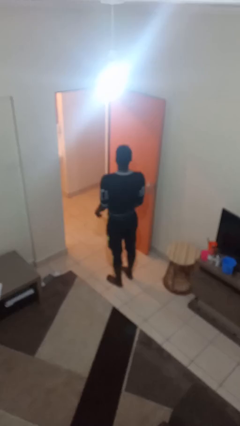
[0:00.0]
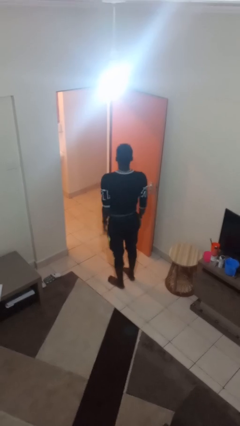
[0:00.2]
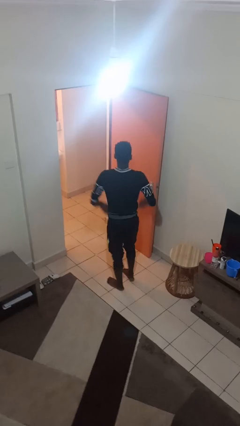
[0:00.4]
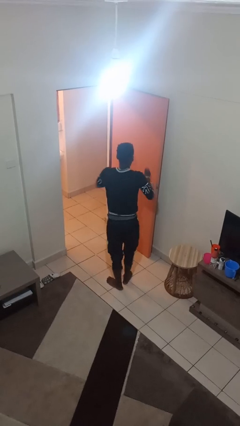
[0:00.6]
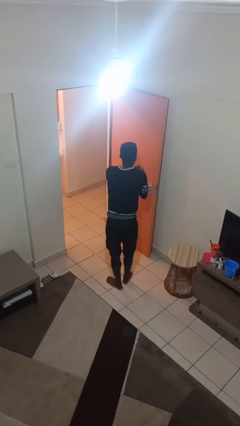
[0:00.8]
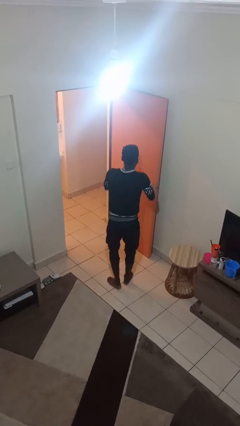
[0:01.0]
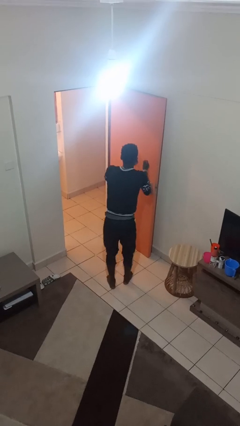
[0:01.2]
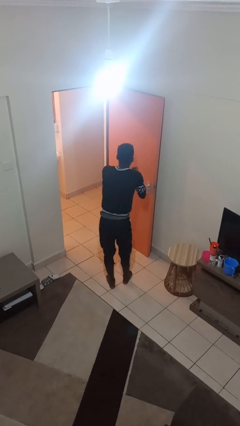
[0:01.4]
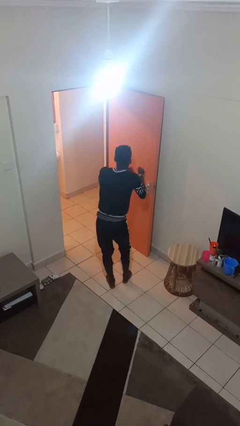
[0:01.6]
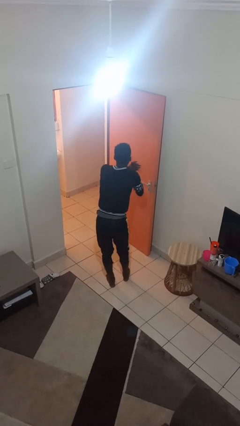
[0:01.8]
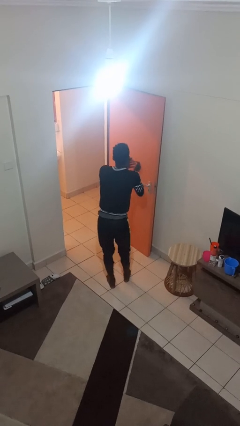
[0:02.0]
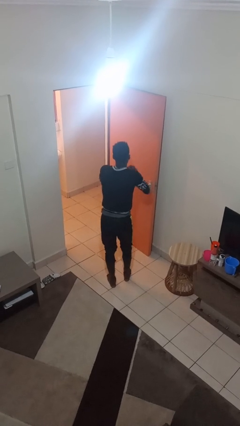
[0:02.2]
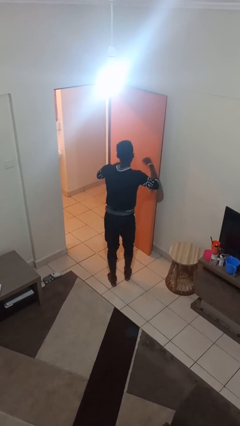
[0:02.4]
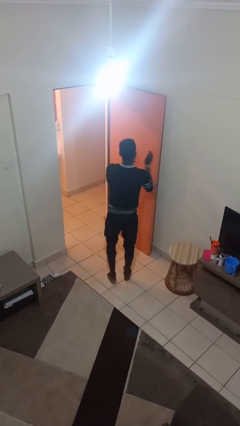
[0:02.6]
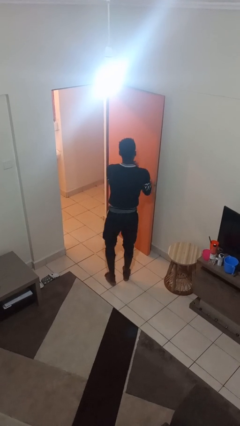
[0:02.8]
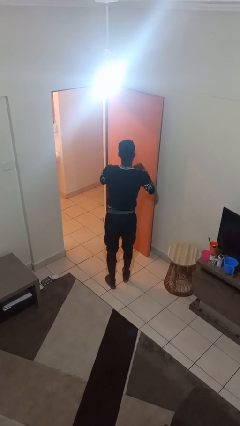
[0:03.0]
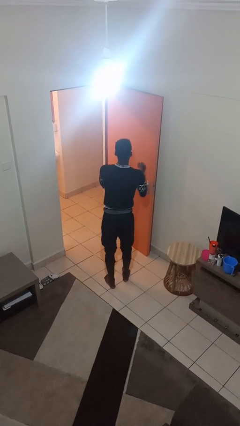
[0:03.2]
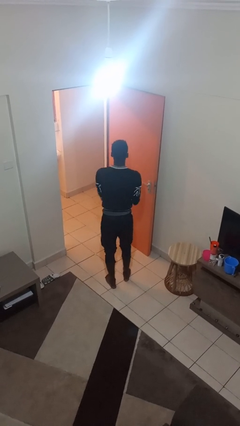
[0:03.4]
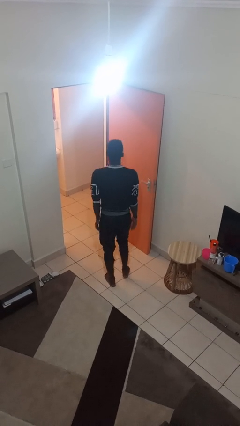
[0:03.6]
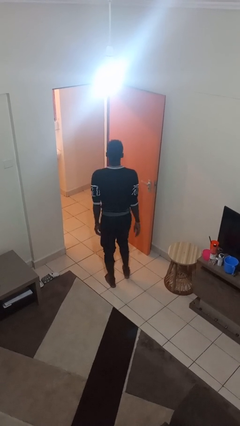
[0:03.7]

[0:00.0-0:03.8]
person claps hands

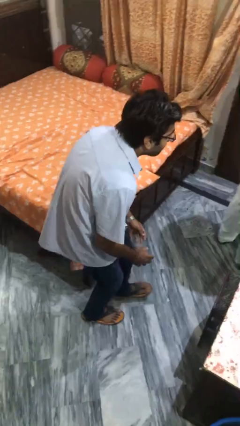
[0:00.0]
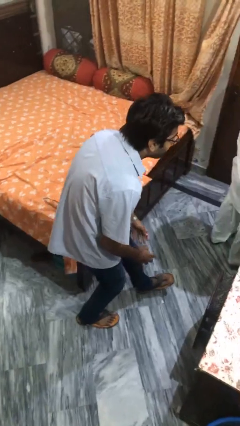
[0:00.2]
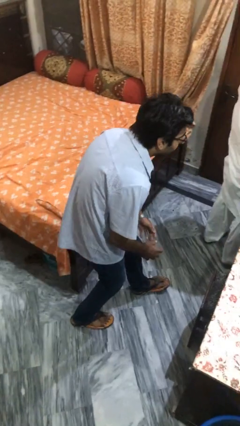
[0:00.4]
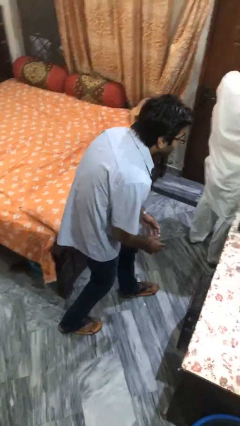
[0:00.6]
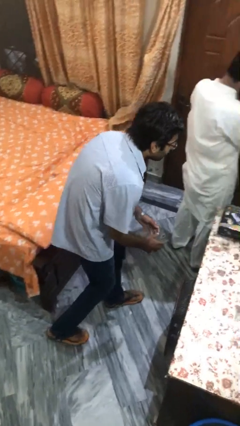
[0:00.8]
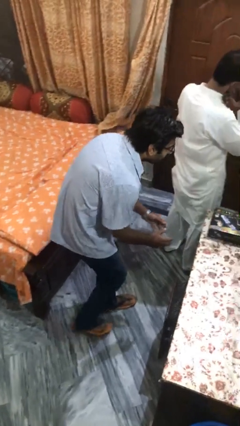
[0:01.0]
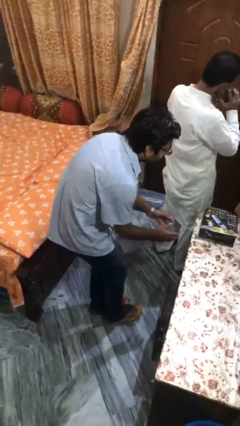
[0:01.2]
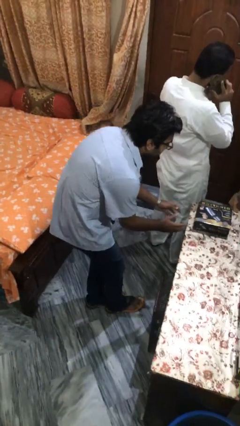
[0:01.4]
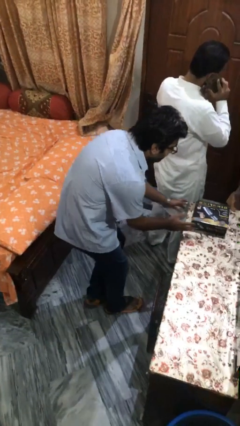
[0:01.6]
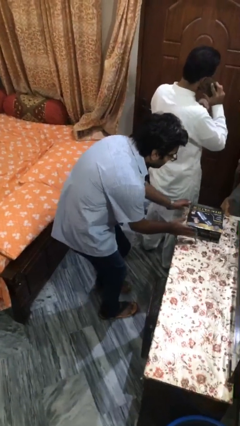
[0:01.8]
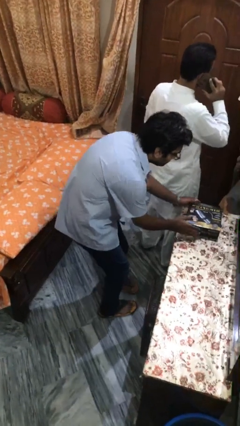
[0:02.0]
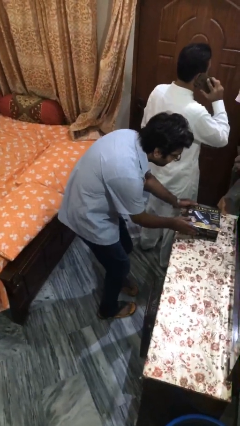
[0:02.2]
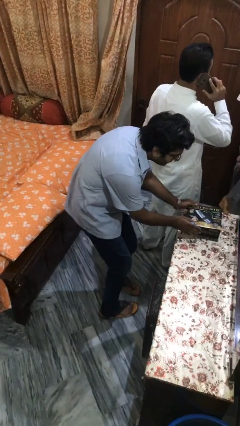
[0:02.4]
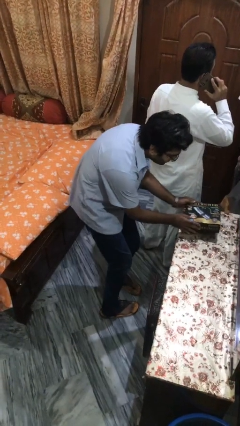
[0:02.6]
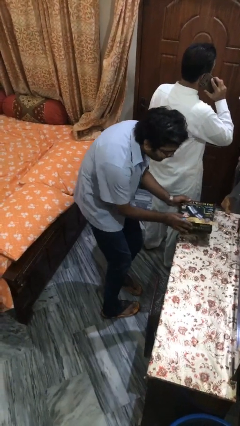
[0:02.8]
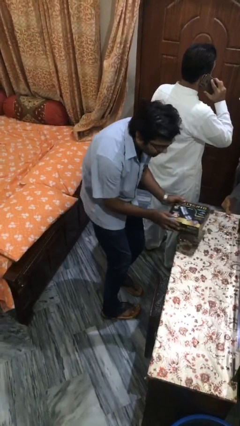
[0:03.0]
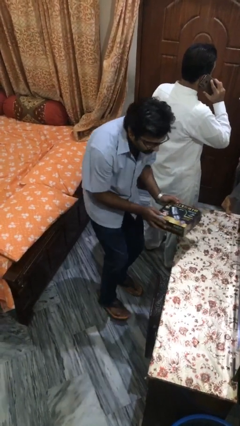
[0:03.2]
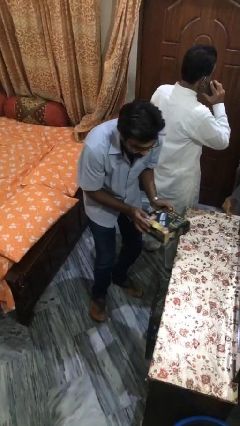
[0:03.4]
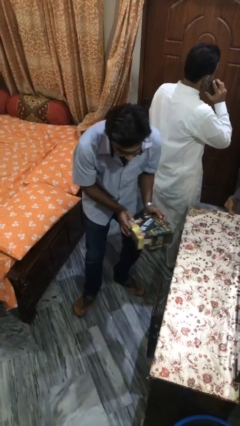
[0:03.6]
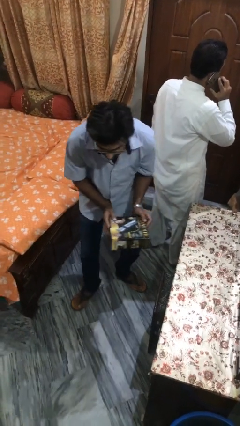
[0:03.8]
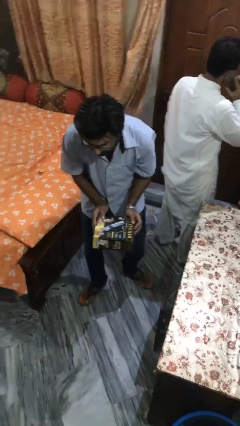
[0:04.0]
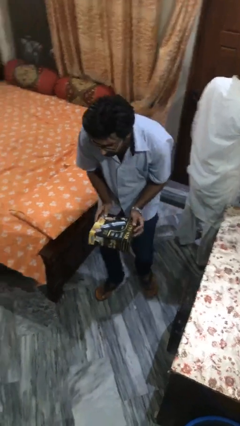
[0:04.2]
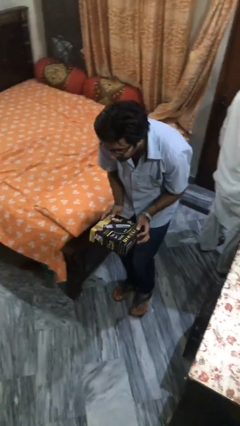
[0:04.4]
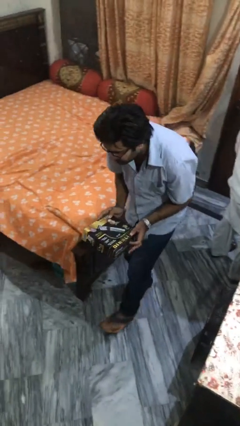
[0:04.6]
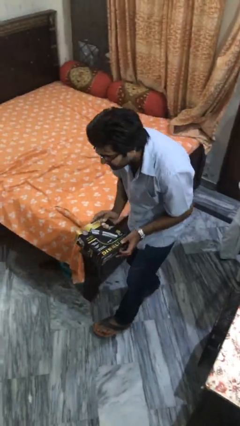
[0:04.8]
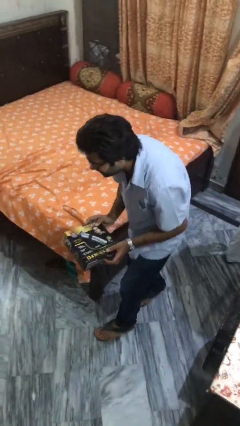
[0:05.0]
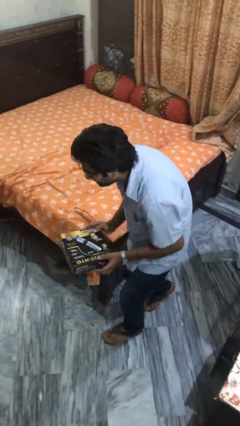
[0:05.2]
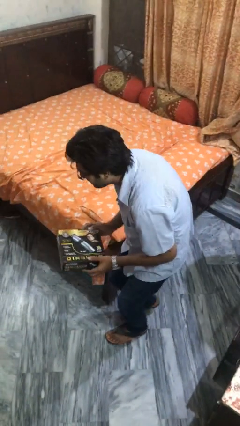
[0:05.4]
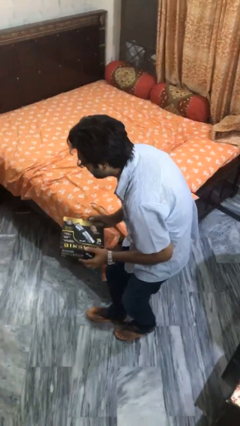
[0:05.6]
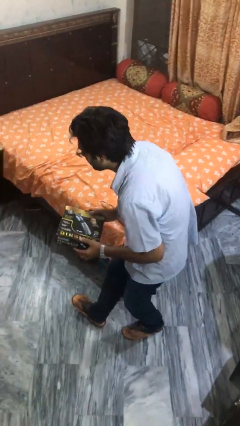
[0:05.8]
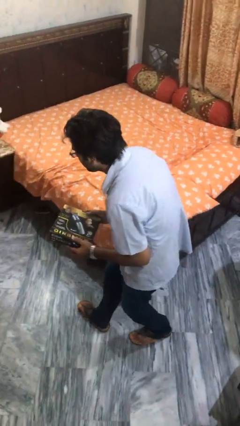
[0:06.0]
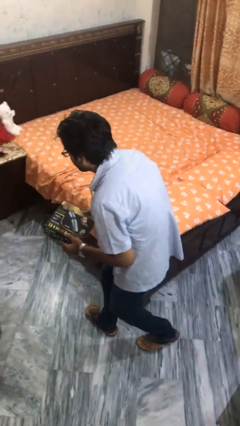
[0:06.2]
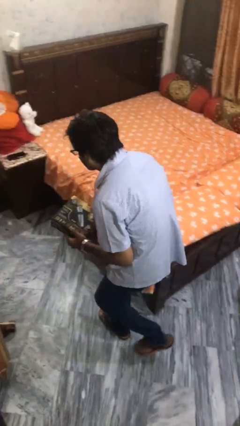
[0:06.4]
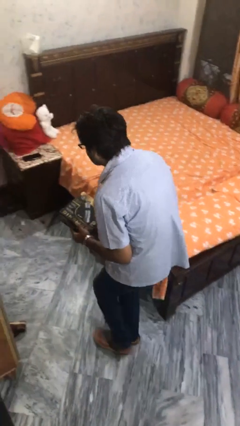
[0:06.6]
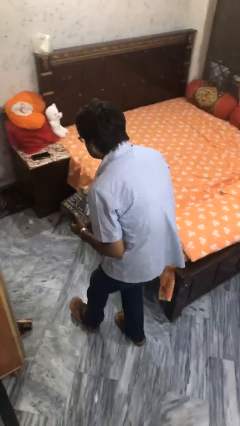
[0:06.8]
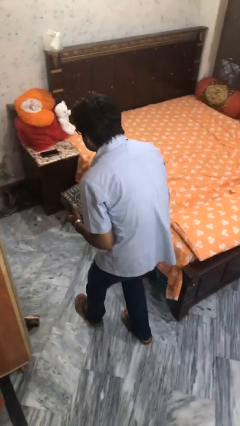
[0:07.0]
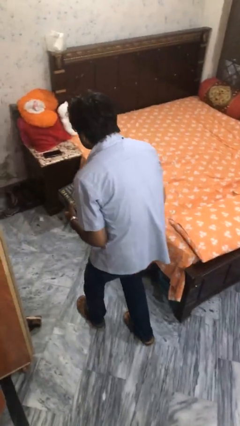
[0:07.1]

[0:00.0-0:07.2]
person steals object from person

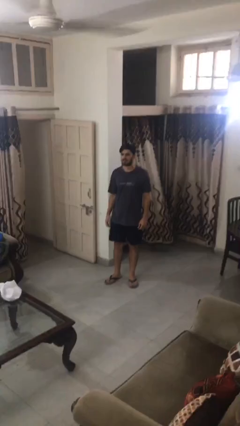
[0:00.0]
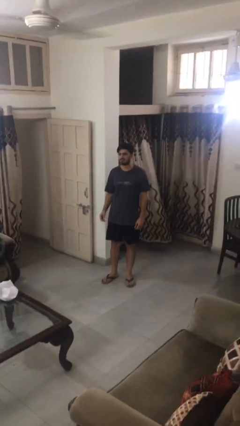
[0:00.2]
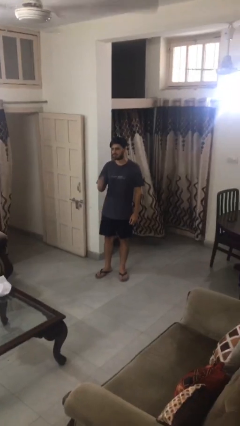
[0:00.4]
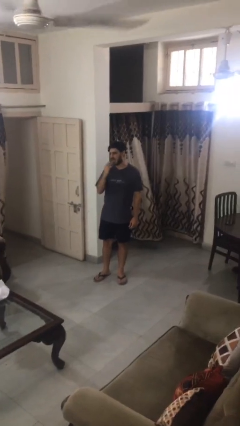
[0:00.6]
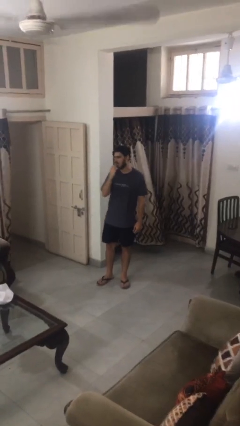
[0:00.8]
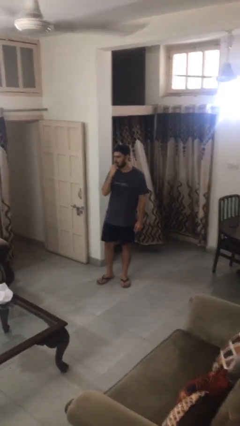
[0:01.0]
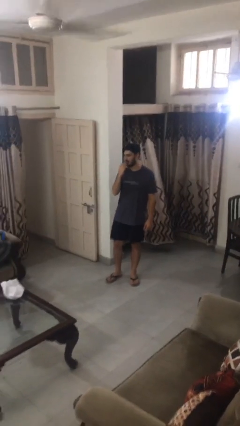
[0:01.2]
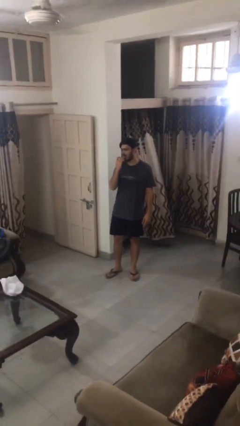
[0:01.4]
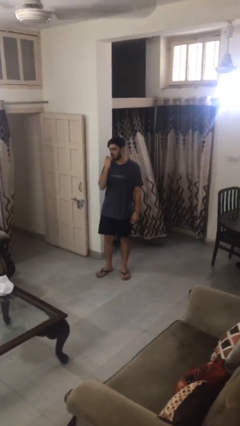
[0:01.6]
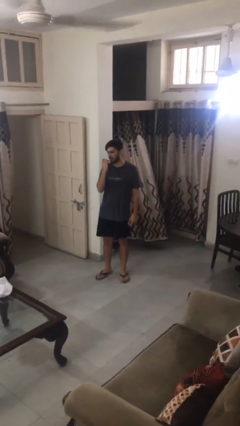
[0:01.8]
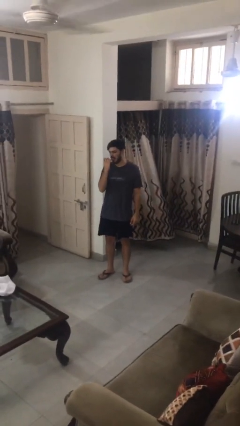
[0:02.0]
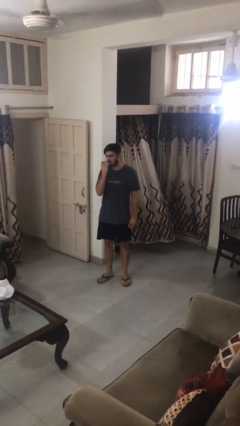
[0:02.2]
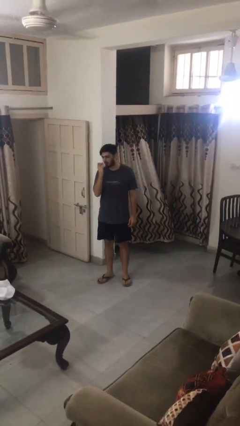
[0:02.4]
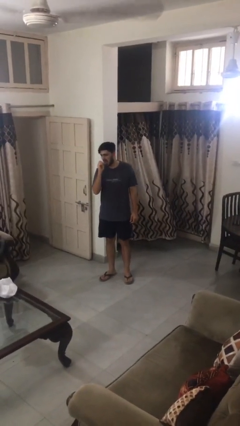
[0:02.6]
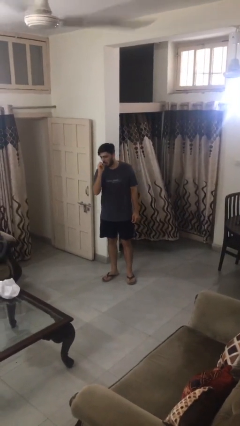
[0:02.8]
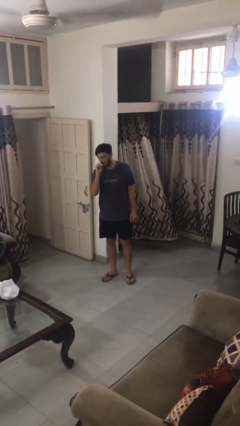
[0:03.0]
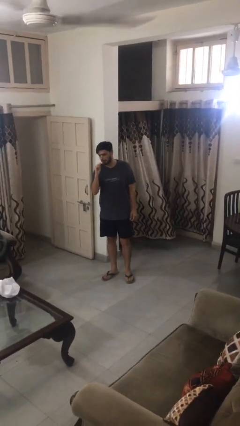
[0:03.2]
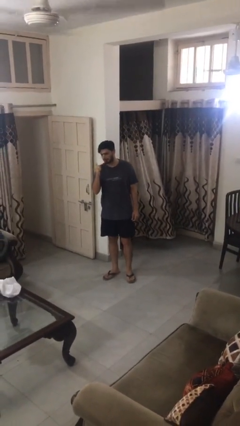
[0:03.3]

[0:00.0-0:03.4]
person licks fingers

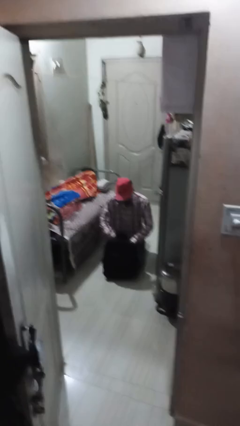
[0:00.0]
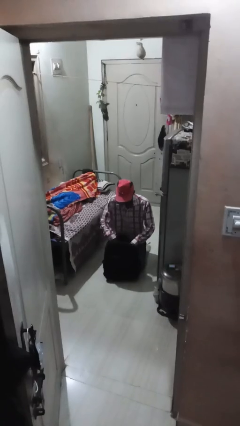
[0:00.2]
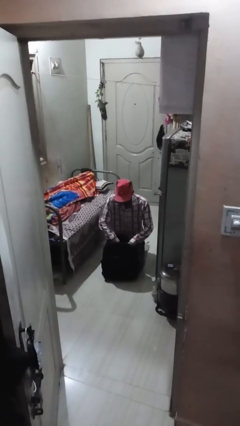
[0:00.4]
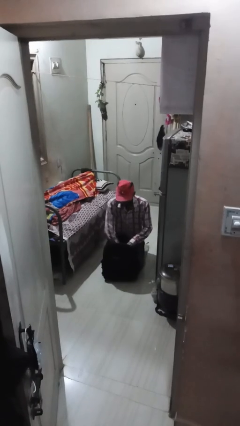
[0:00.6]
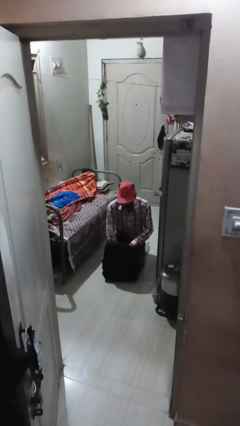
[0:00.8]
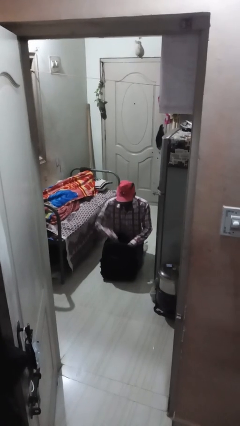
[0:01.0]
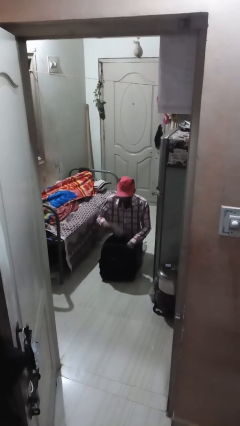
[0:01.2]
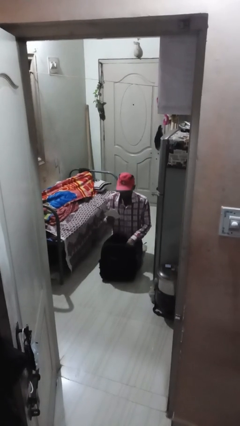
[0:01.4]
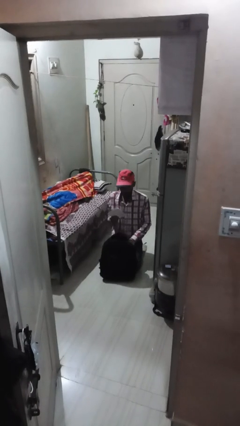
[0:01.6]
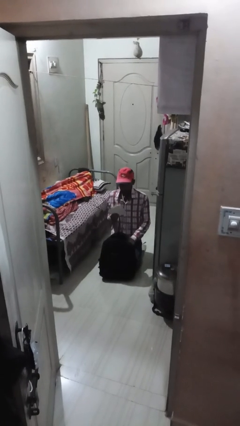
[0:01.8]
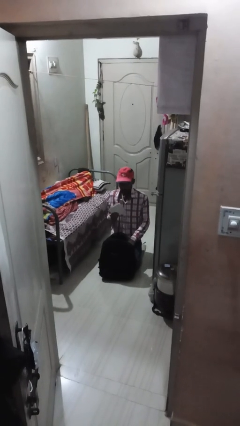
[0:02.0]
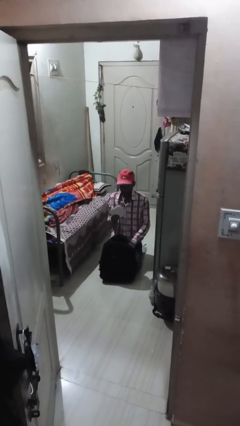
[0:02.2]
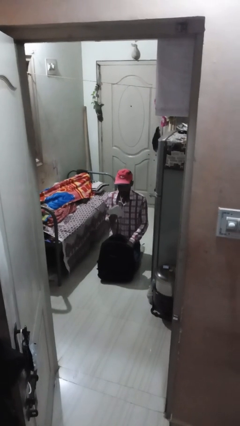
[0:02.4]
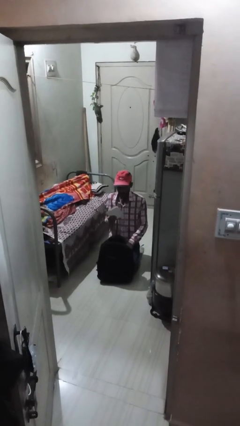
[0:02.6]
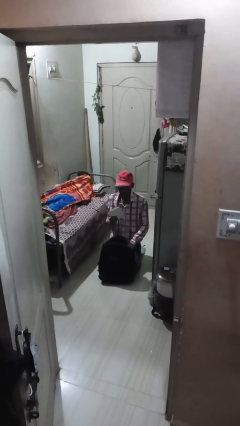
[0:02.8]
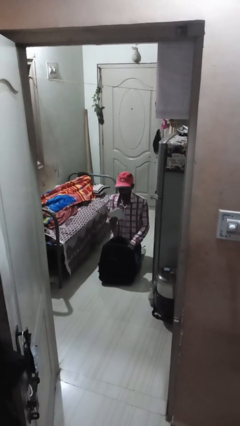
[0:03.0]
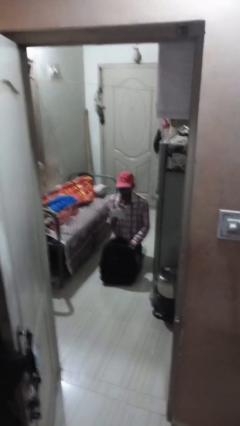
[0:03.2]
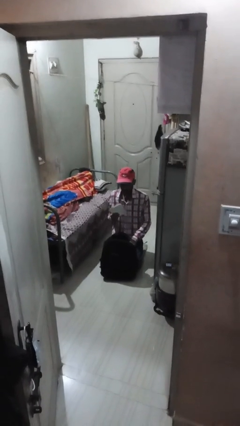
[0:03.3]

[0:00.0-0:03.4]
person takes object from backpack
